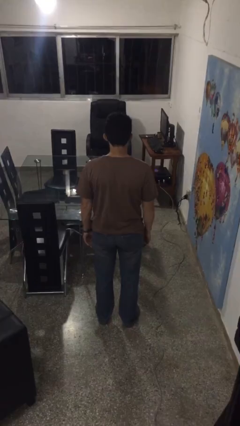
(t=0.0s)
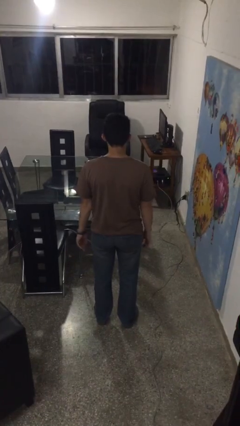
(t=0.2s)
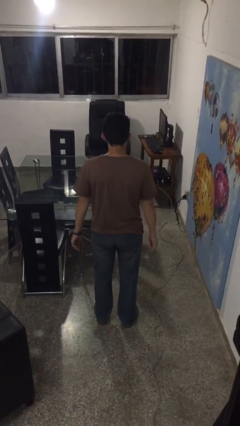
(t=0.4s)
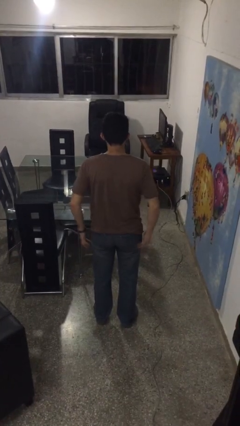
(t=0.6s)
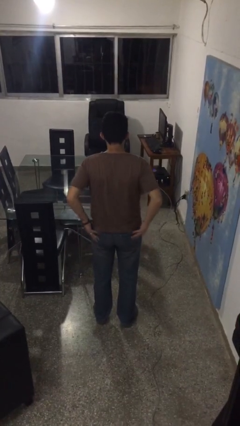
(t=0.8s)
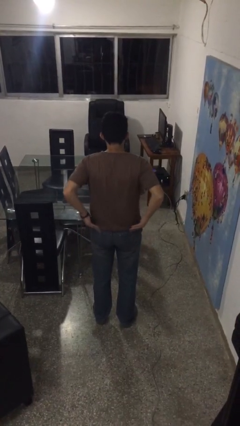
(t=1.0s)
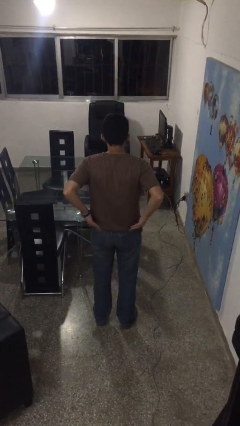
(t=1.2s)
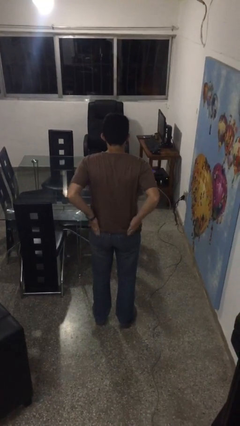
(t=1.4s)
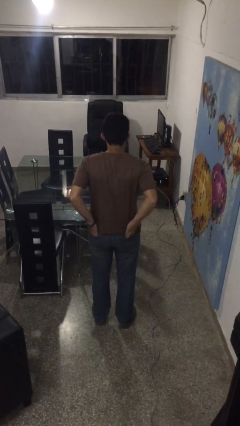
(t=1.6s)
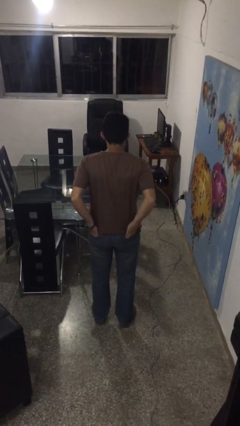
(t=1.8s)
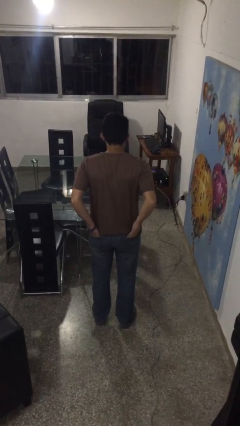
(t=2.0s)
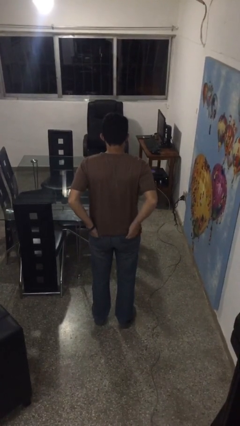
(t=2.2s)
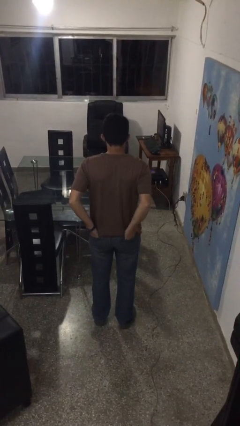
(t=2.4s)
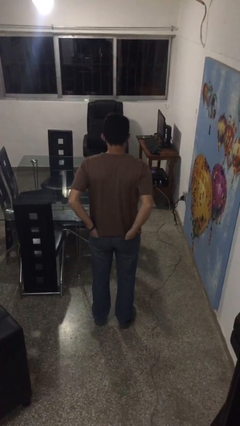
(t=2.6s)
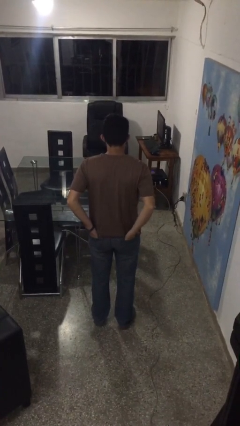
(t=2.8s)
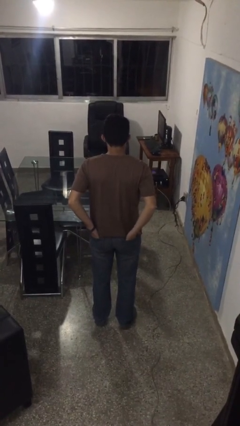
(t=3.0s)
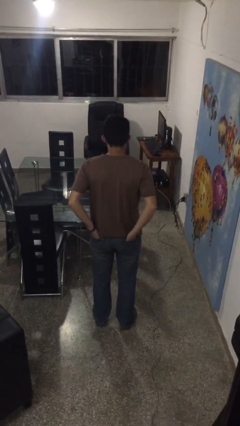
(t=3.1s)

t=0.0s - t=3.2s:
person puts hands in back pockets

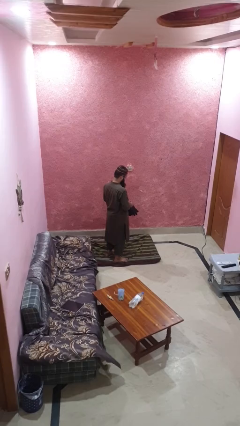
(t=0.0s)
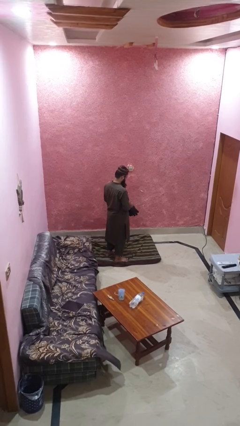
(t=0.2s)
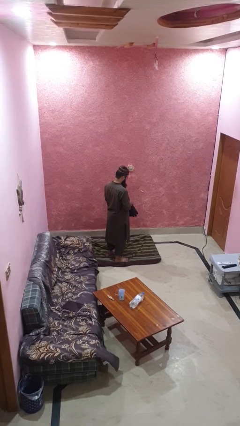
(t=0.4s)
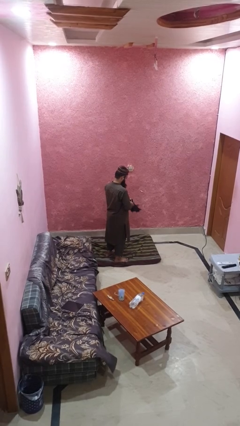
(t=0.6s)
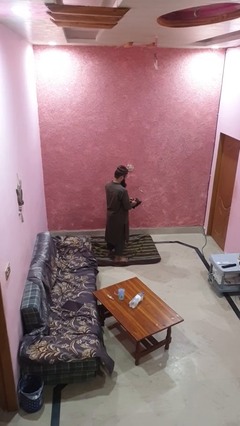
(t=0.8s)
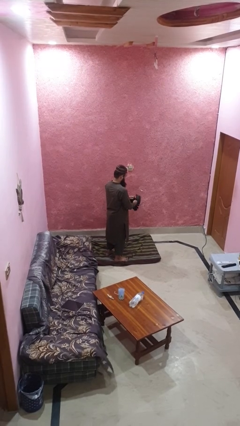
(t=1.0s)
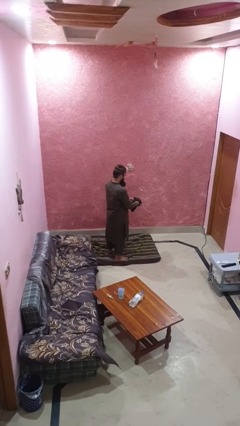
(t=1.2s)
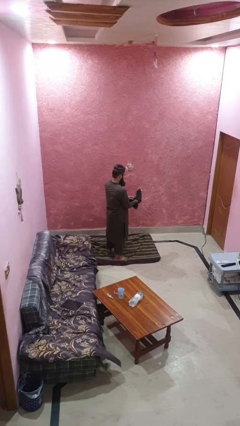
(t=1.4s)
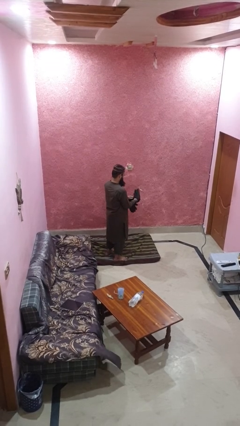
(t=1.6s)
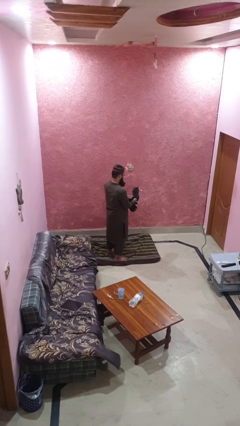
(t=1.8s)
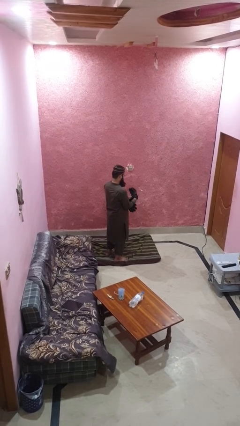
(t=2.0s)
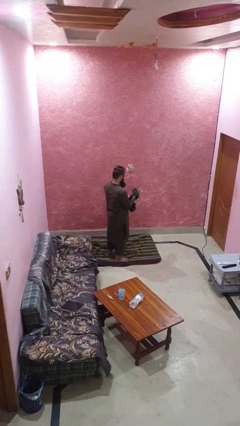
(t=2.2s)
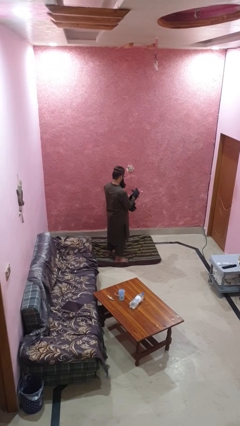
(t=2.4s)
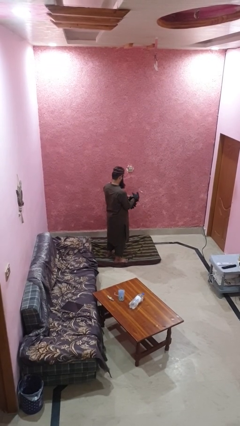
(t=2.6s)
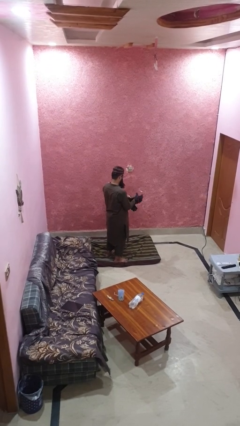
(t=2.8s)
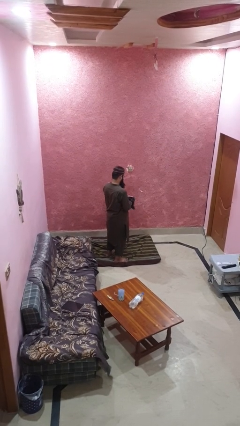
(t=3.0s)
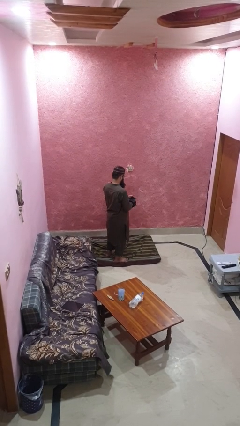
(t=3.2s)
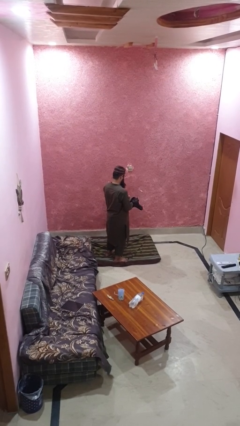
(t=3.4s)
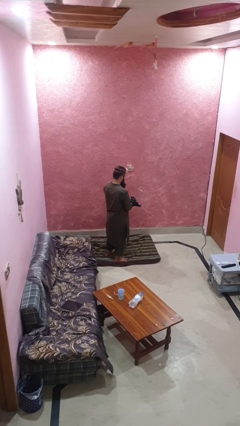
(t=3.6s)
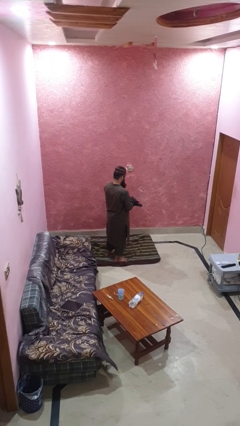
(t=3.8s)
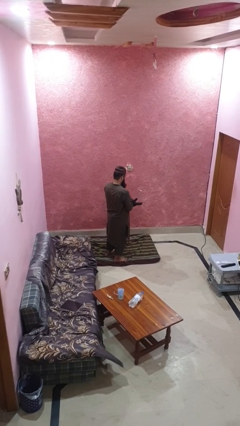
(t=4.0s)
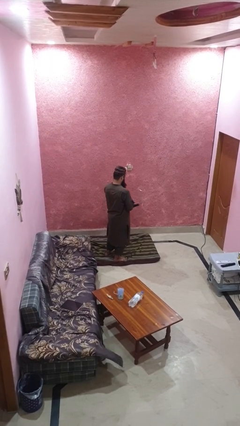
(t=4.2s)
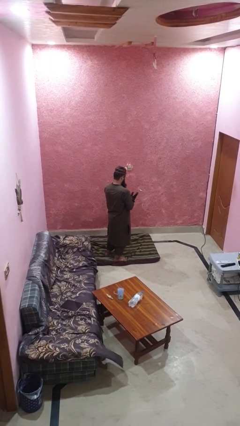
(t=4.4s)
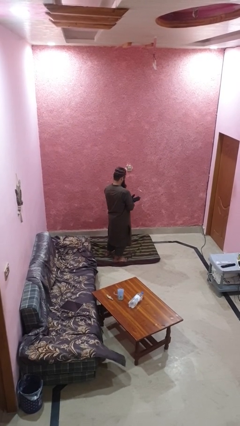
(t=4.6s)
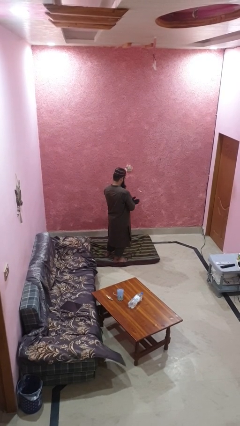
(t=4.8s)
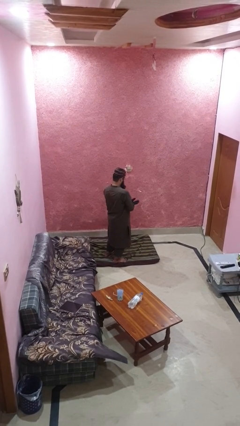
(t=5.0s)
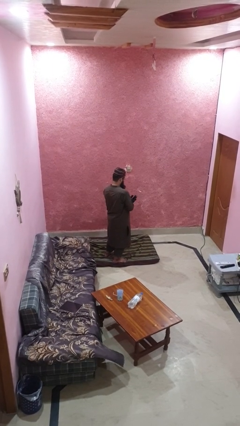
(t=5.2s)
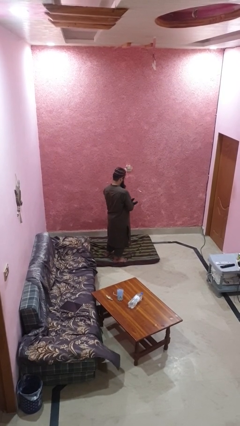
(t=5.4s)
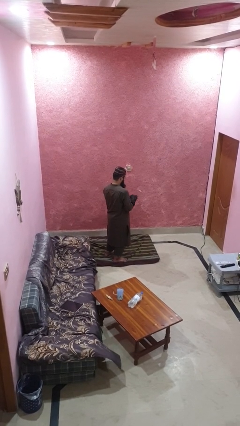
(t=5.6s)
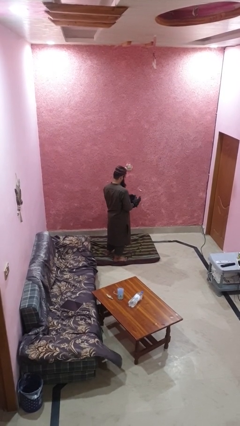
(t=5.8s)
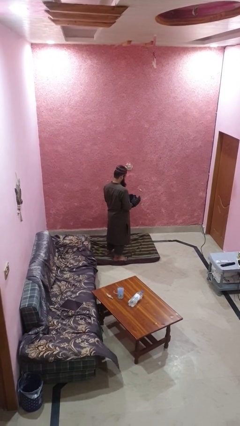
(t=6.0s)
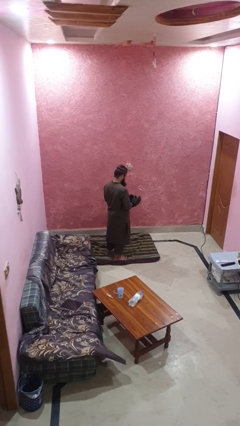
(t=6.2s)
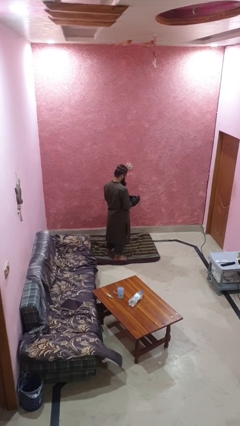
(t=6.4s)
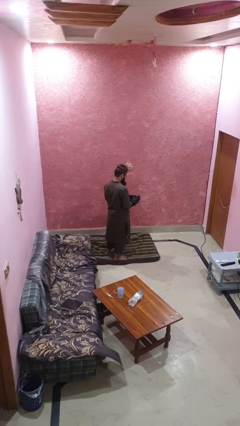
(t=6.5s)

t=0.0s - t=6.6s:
person puts on gloves

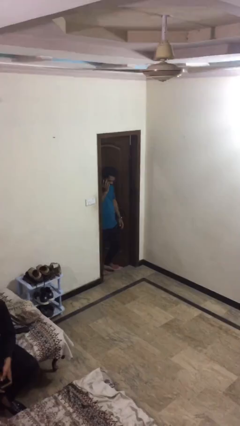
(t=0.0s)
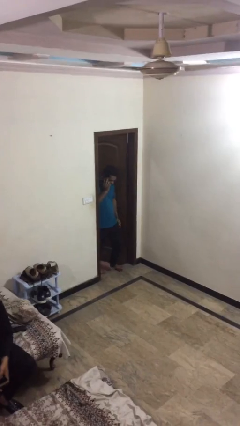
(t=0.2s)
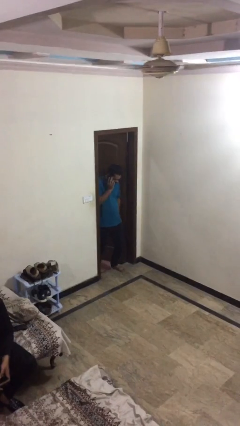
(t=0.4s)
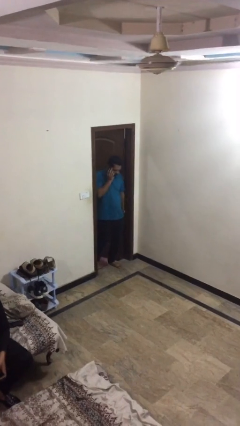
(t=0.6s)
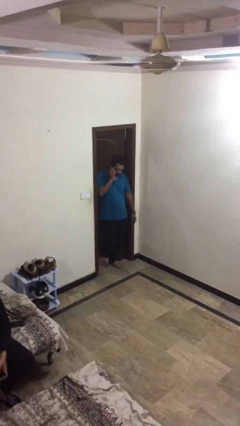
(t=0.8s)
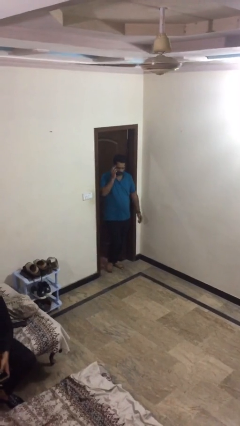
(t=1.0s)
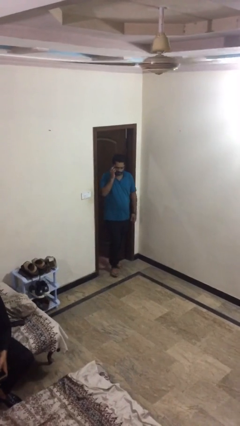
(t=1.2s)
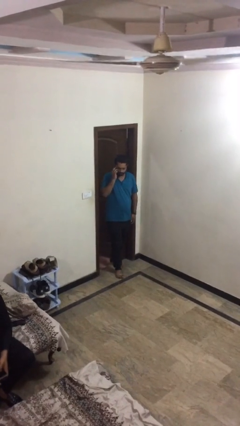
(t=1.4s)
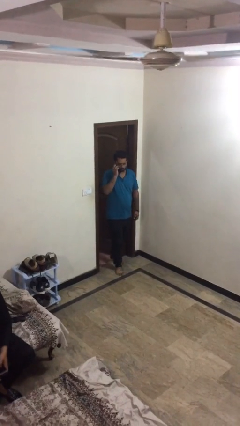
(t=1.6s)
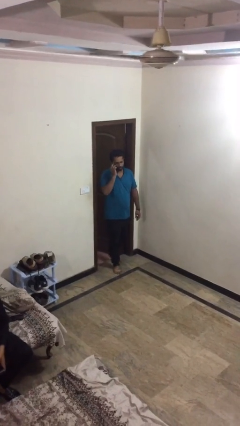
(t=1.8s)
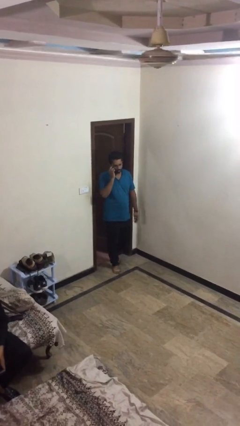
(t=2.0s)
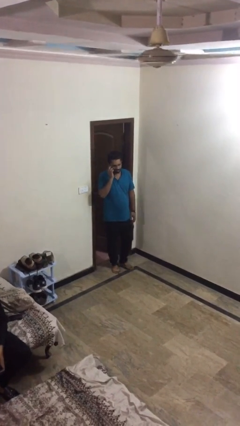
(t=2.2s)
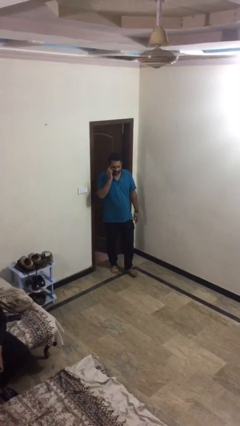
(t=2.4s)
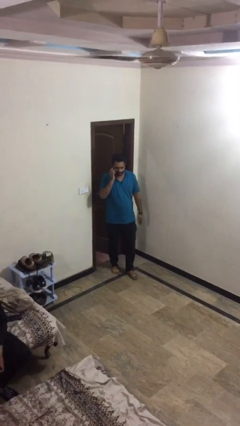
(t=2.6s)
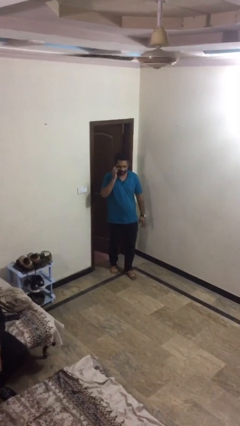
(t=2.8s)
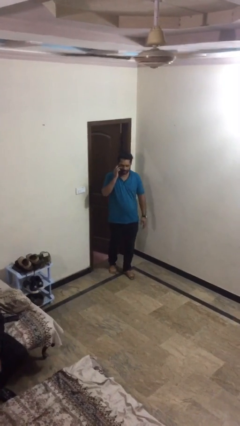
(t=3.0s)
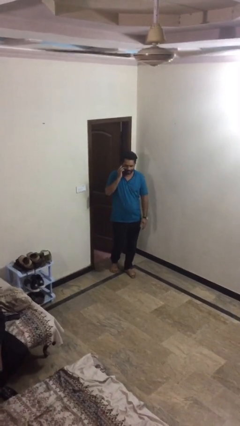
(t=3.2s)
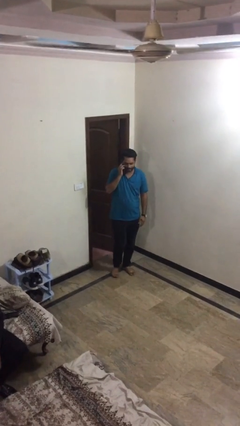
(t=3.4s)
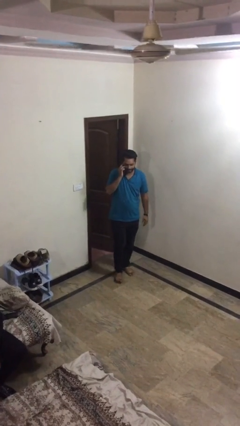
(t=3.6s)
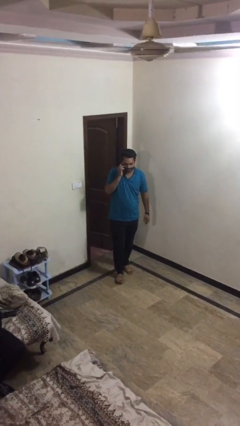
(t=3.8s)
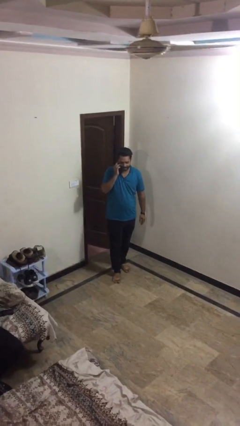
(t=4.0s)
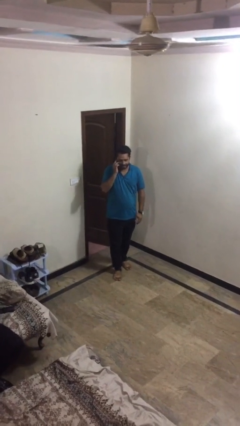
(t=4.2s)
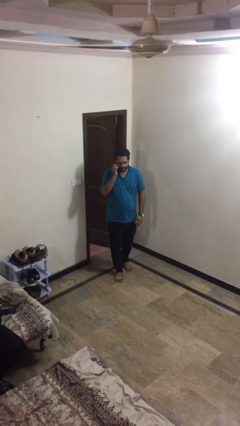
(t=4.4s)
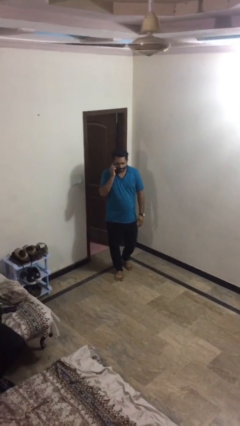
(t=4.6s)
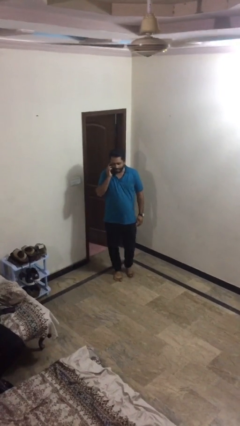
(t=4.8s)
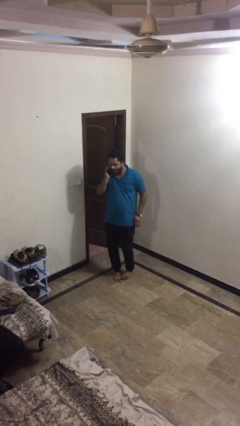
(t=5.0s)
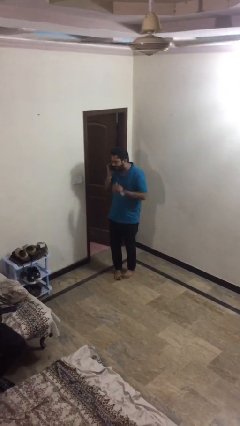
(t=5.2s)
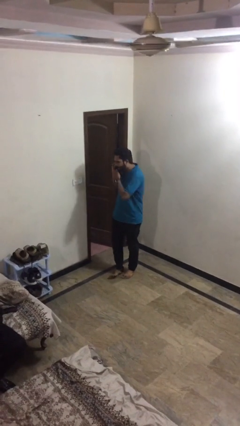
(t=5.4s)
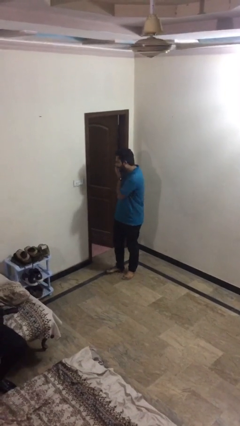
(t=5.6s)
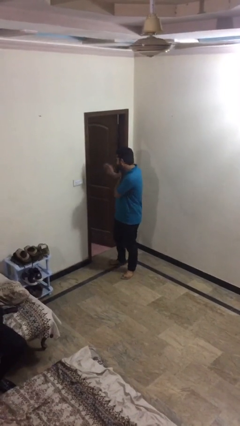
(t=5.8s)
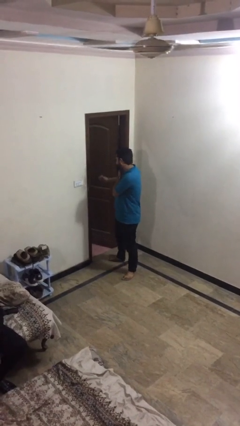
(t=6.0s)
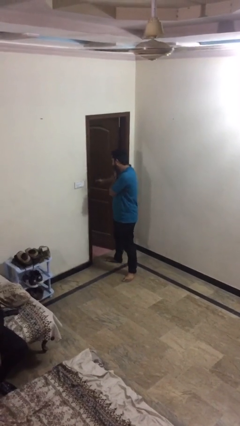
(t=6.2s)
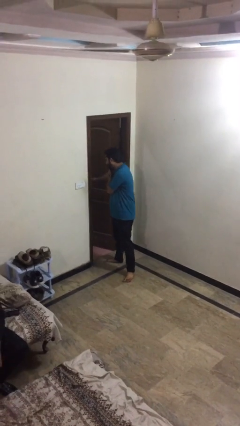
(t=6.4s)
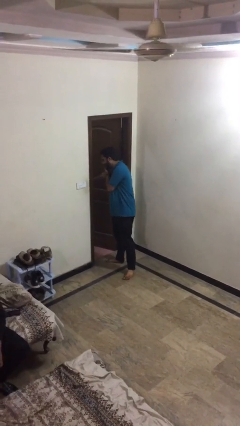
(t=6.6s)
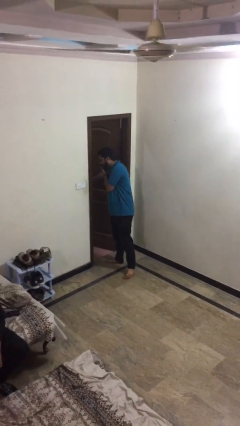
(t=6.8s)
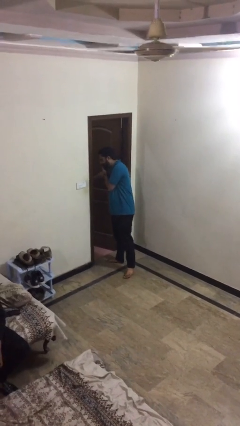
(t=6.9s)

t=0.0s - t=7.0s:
person enters scene through structure

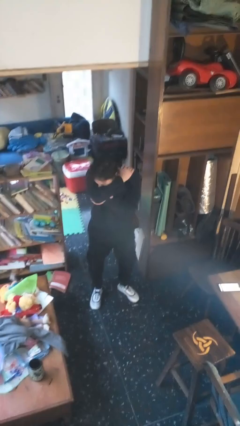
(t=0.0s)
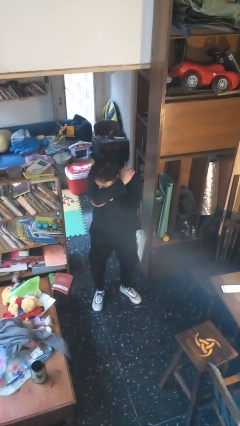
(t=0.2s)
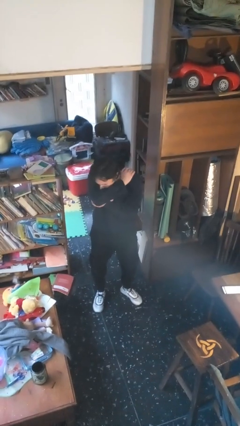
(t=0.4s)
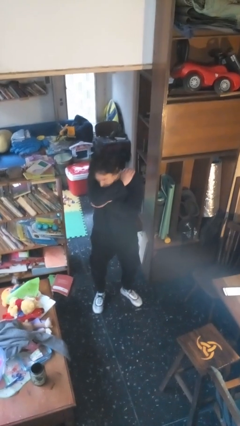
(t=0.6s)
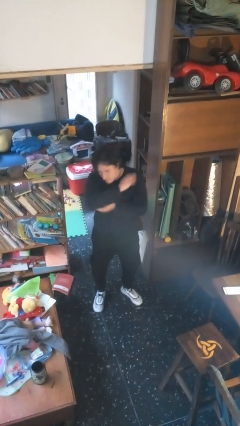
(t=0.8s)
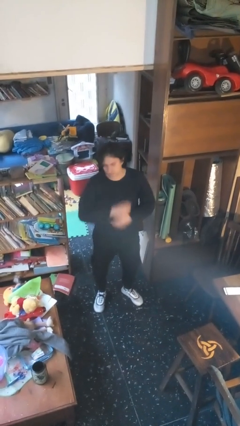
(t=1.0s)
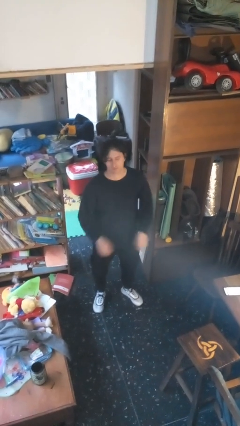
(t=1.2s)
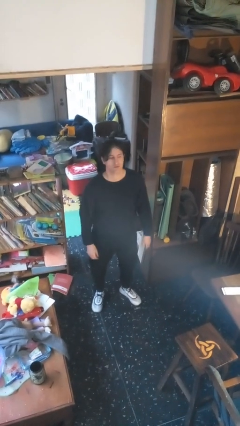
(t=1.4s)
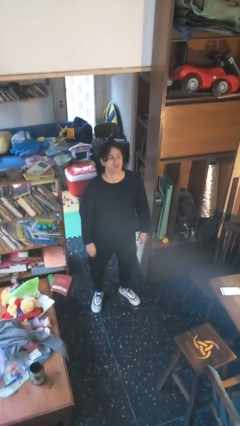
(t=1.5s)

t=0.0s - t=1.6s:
person sneezes into arm
